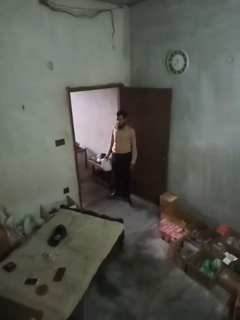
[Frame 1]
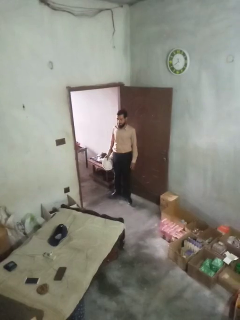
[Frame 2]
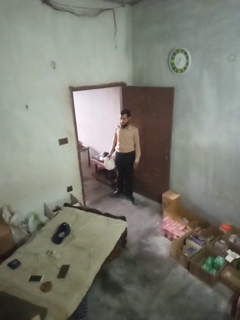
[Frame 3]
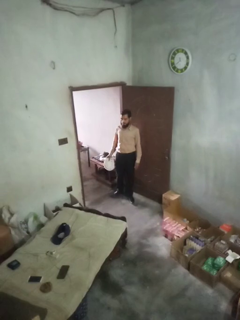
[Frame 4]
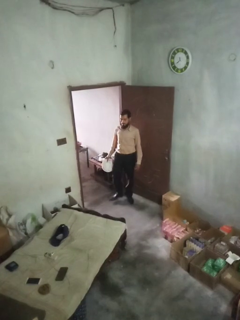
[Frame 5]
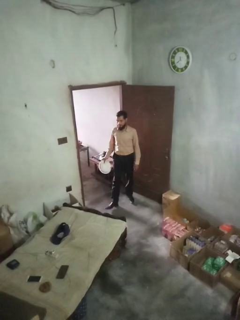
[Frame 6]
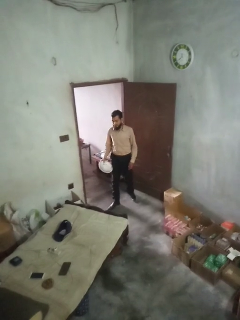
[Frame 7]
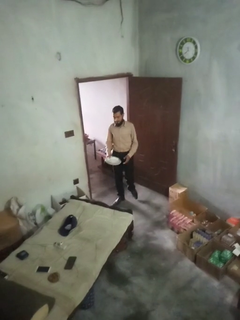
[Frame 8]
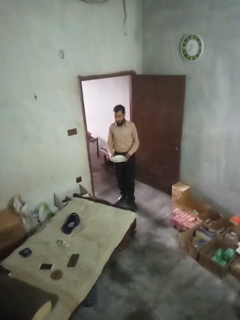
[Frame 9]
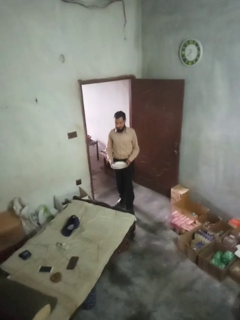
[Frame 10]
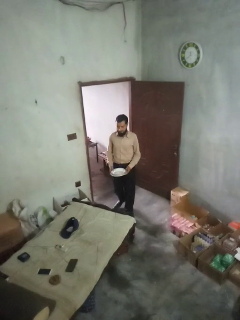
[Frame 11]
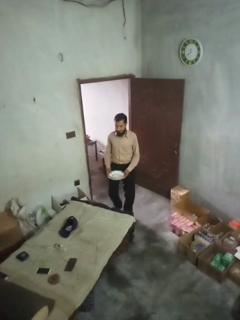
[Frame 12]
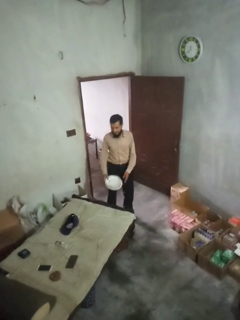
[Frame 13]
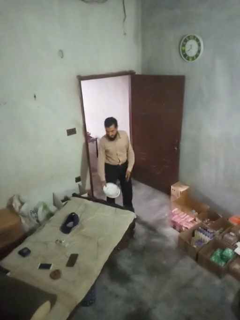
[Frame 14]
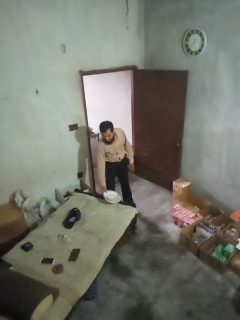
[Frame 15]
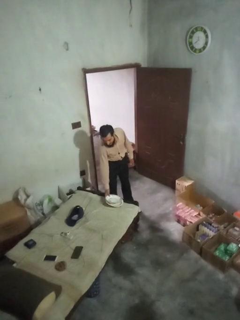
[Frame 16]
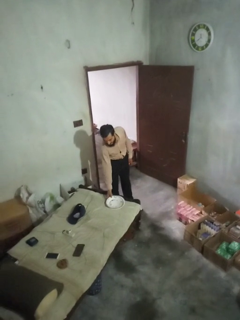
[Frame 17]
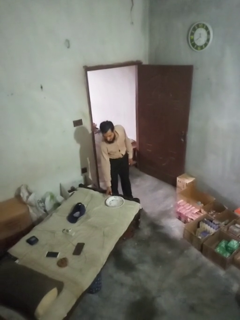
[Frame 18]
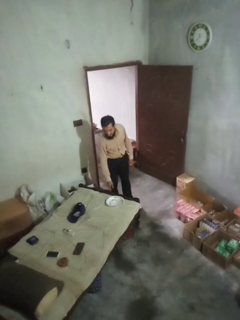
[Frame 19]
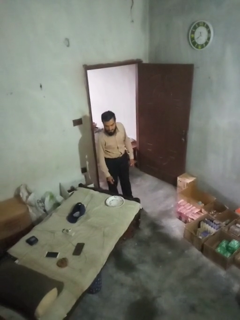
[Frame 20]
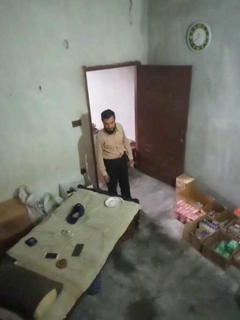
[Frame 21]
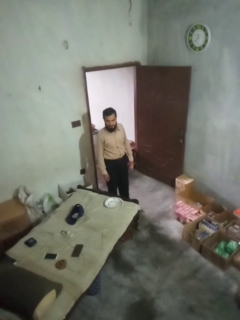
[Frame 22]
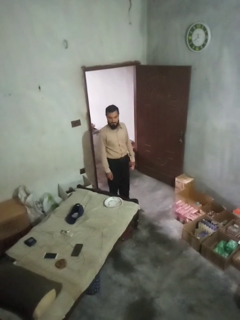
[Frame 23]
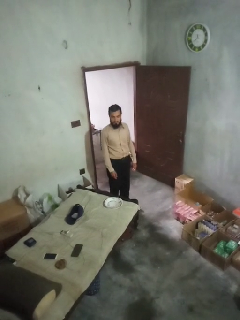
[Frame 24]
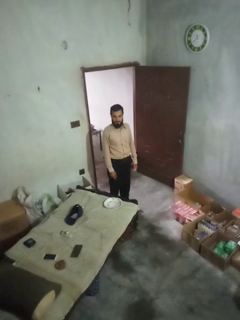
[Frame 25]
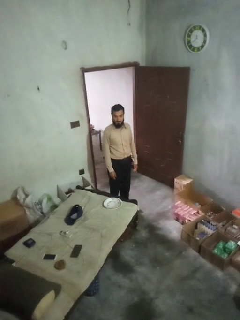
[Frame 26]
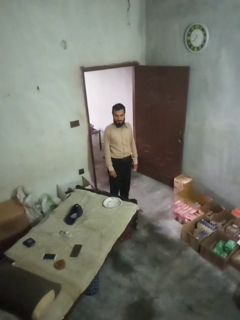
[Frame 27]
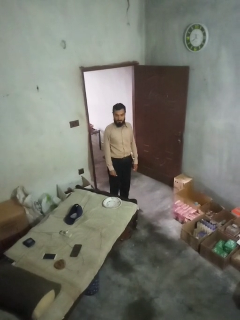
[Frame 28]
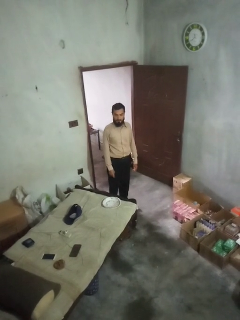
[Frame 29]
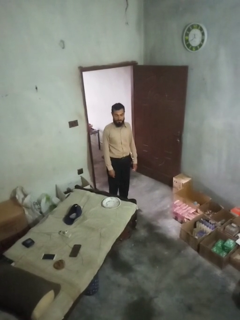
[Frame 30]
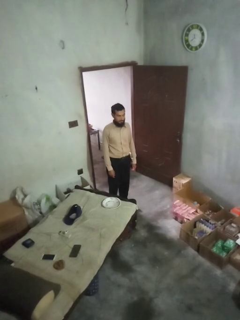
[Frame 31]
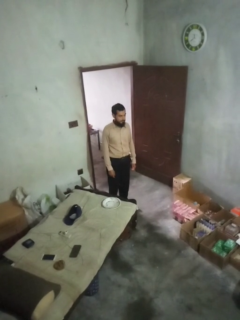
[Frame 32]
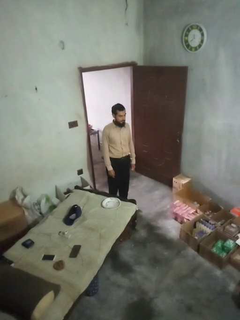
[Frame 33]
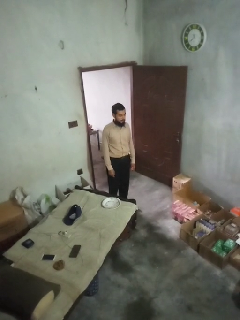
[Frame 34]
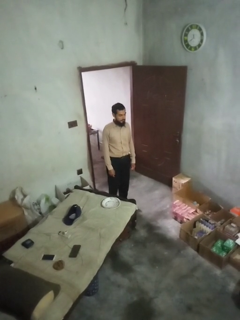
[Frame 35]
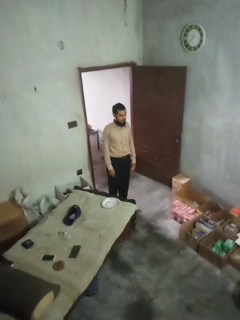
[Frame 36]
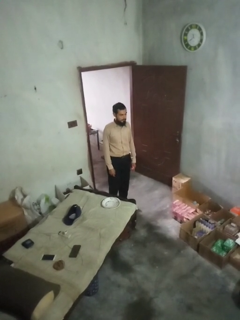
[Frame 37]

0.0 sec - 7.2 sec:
person carries groceries

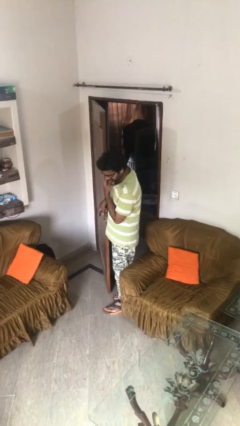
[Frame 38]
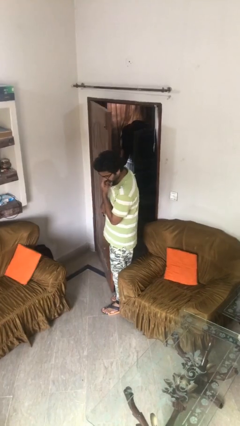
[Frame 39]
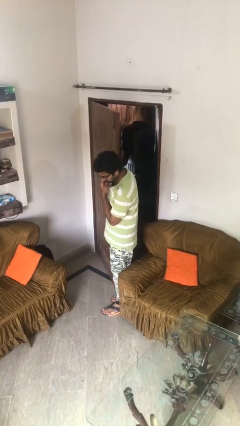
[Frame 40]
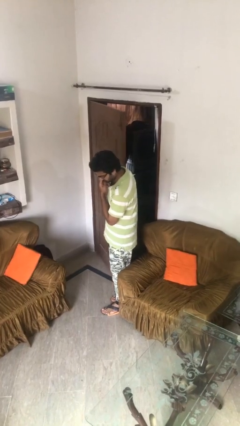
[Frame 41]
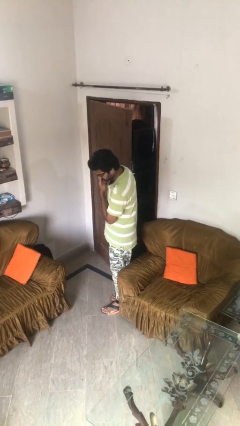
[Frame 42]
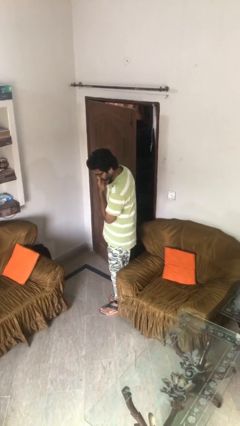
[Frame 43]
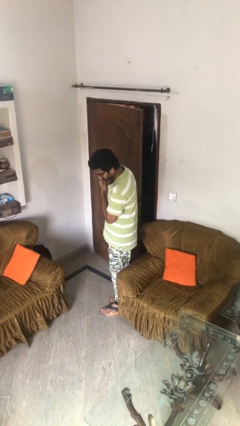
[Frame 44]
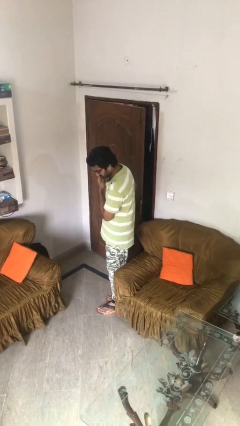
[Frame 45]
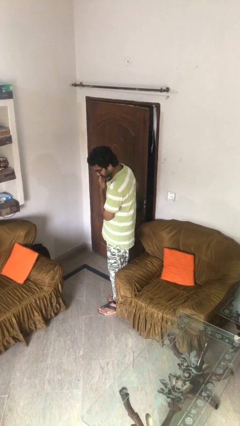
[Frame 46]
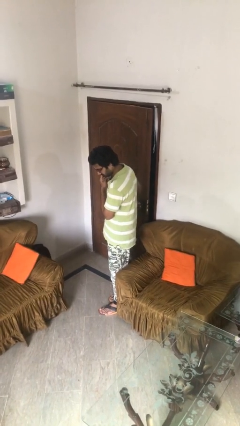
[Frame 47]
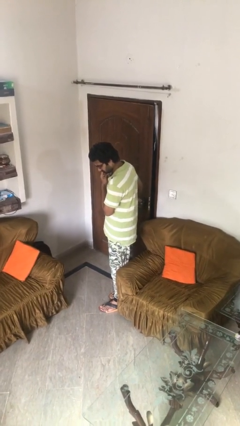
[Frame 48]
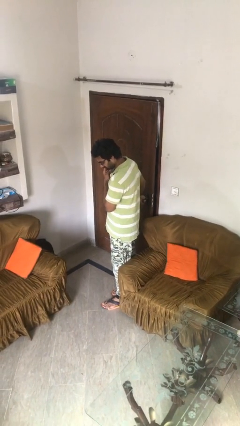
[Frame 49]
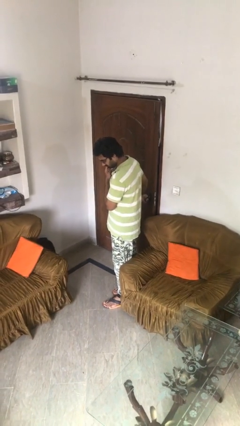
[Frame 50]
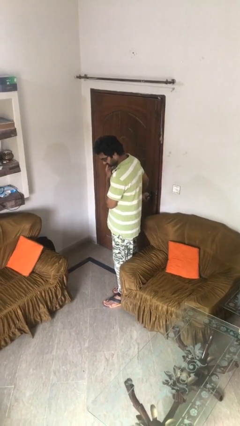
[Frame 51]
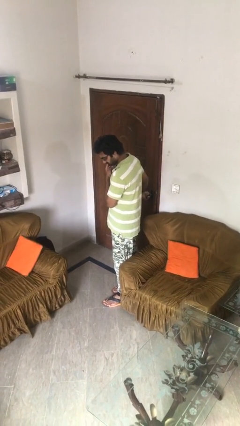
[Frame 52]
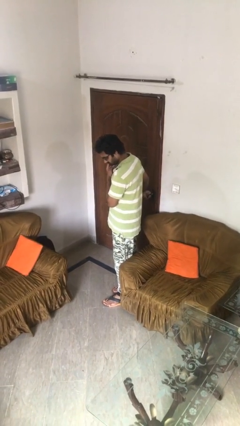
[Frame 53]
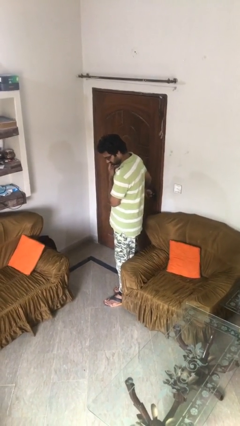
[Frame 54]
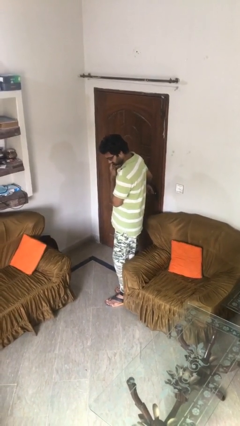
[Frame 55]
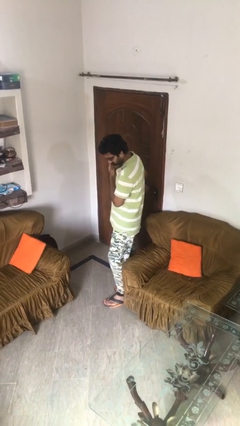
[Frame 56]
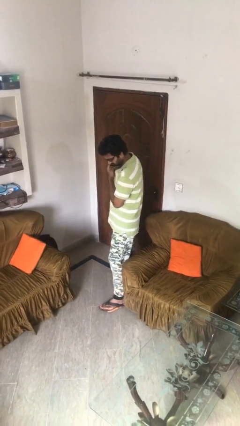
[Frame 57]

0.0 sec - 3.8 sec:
person closes facility door

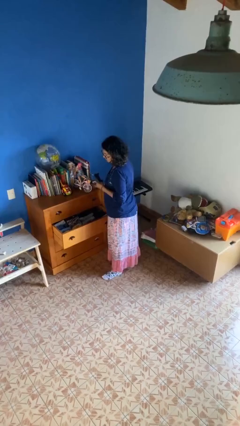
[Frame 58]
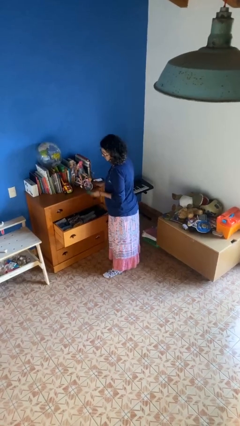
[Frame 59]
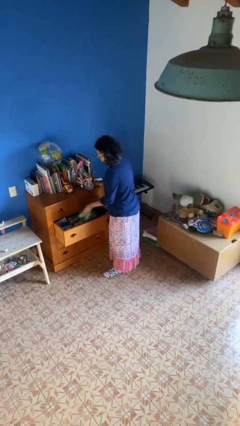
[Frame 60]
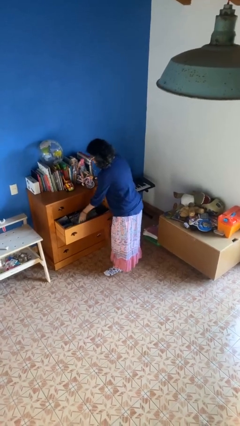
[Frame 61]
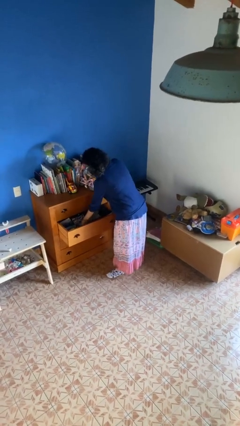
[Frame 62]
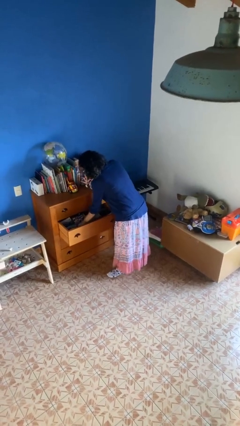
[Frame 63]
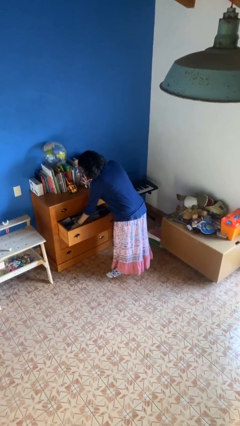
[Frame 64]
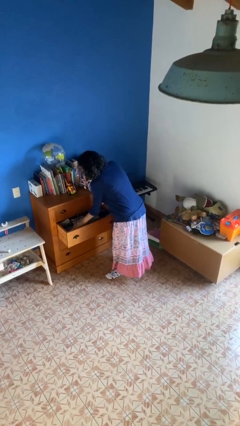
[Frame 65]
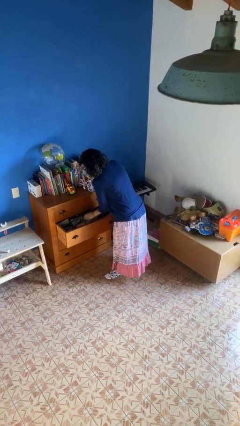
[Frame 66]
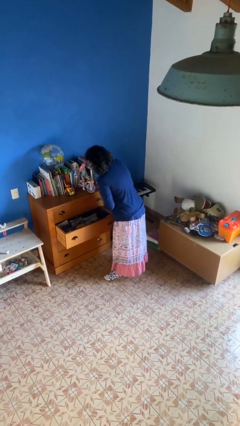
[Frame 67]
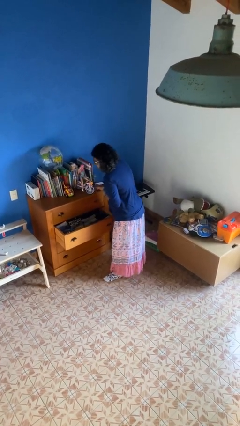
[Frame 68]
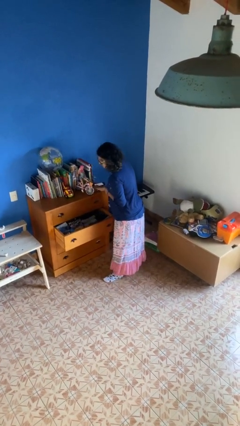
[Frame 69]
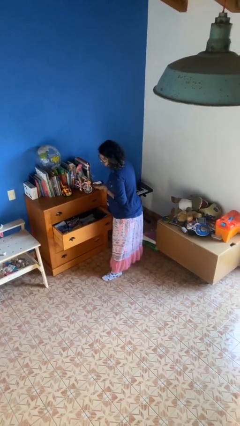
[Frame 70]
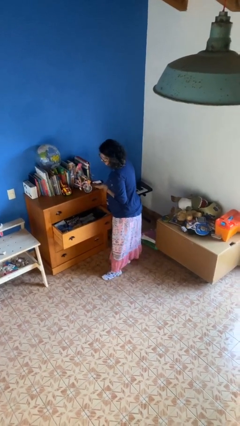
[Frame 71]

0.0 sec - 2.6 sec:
person puts clothes into dresser

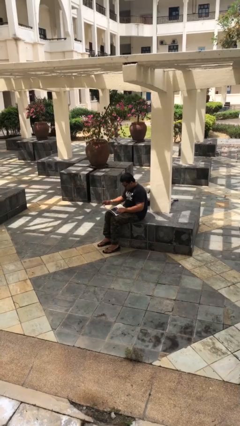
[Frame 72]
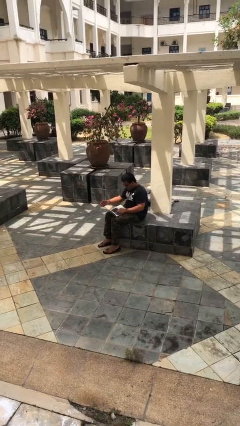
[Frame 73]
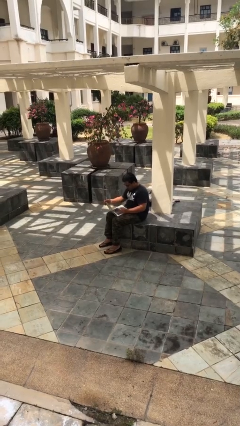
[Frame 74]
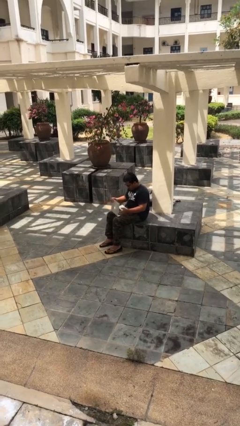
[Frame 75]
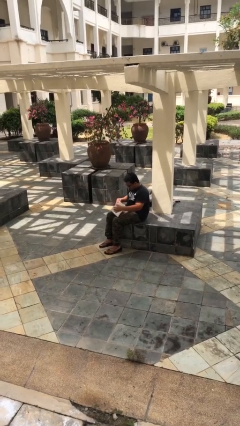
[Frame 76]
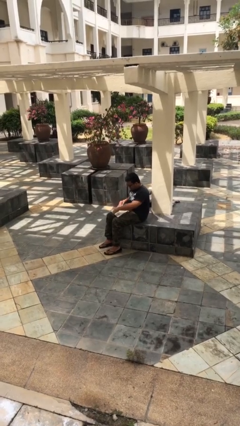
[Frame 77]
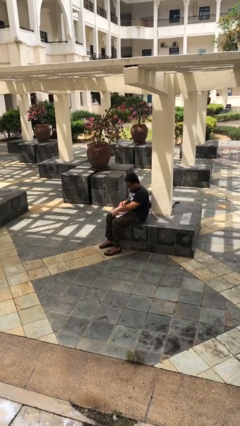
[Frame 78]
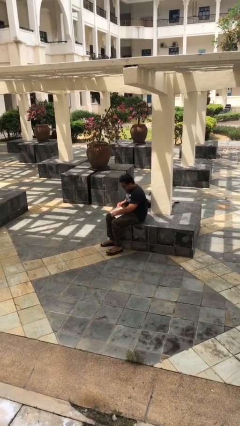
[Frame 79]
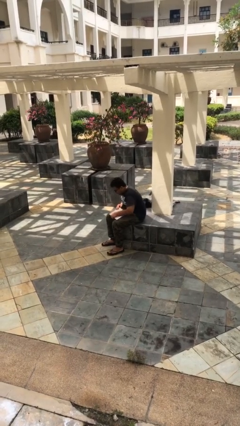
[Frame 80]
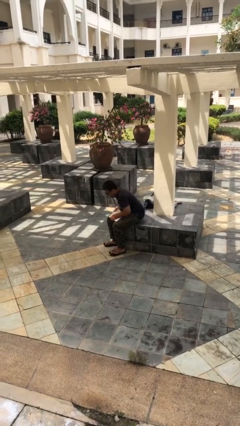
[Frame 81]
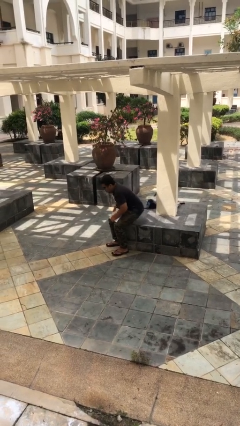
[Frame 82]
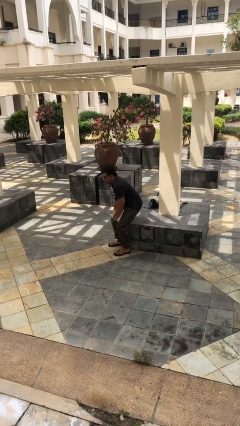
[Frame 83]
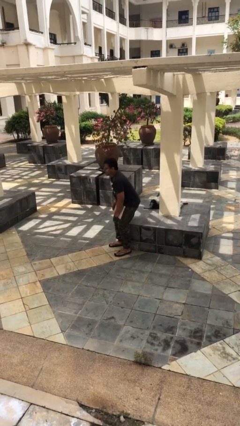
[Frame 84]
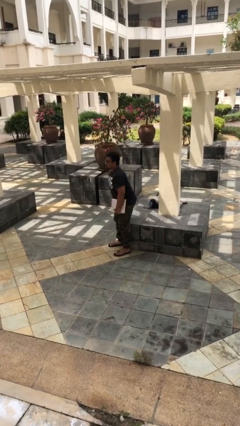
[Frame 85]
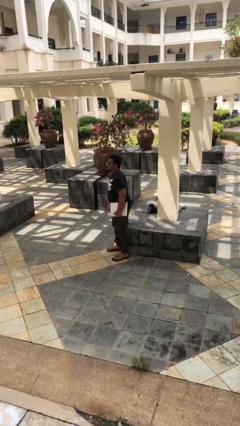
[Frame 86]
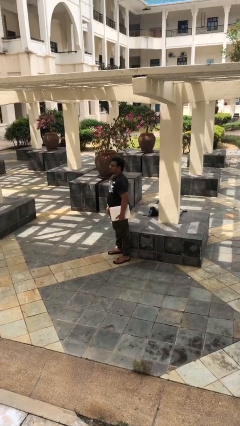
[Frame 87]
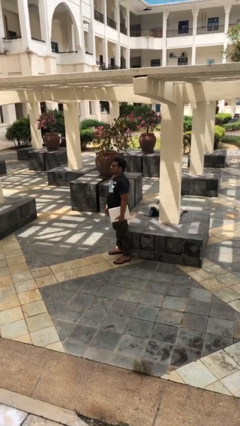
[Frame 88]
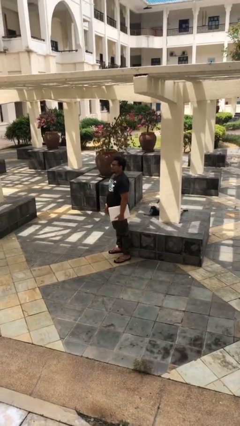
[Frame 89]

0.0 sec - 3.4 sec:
person stands up

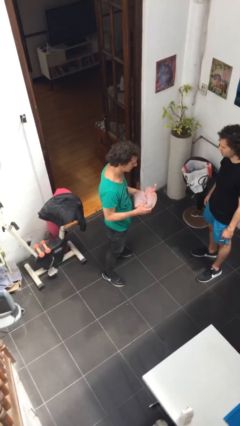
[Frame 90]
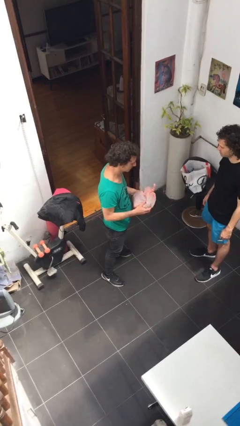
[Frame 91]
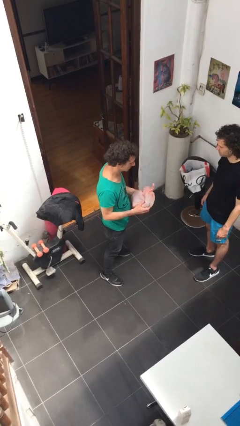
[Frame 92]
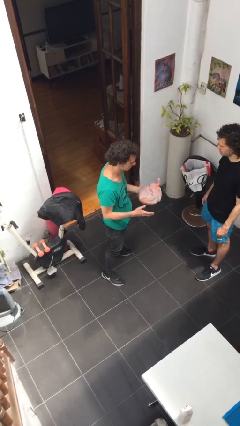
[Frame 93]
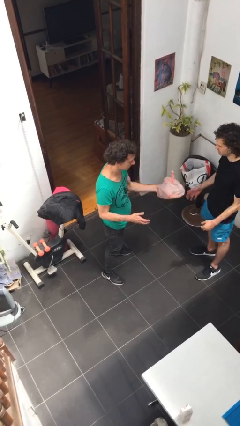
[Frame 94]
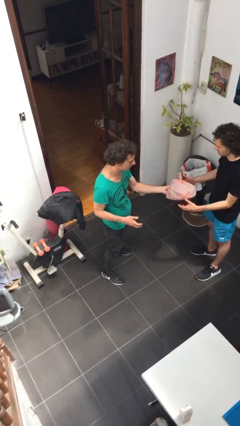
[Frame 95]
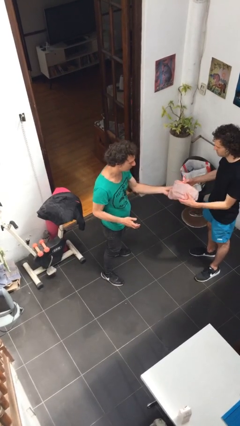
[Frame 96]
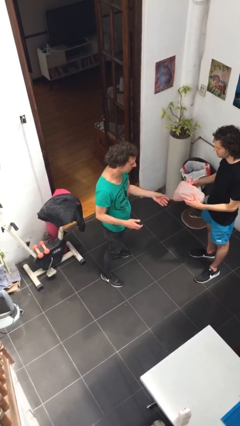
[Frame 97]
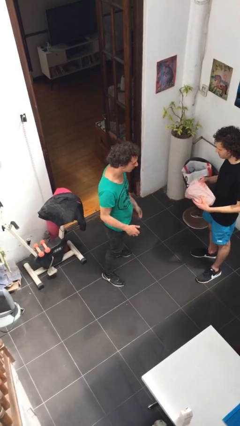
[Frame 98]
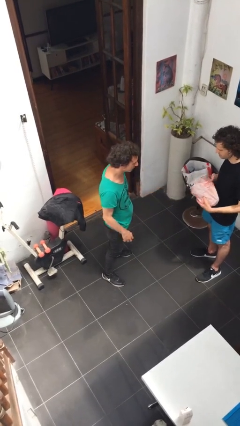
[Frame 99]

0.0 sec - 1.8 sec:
person transfers object to person

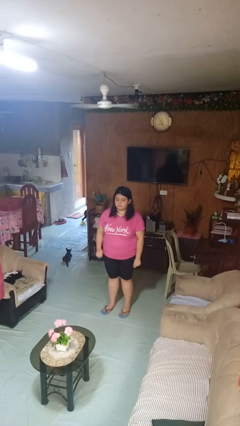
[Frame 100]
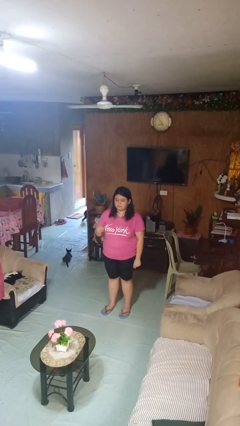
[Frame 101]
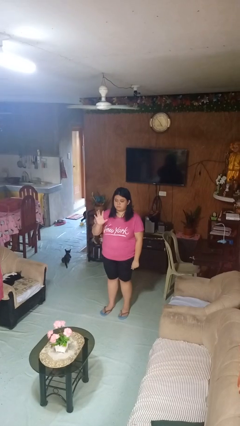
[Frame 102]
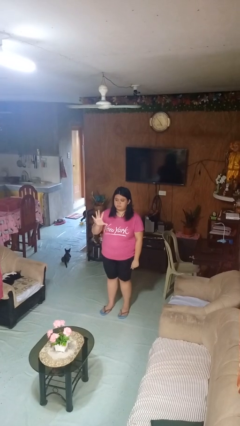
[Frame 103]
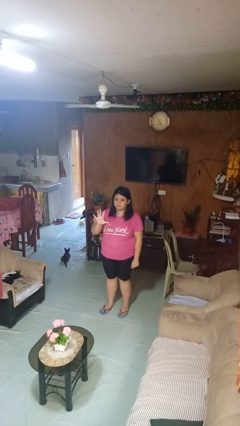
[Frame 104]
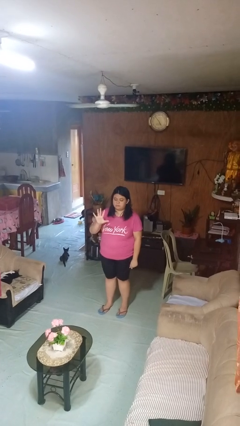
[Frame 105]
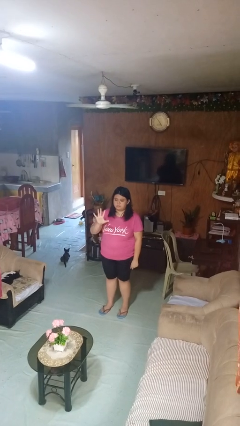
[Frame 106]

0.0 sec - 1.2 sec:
person gestures number five
